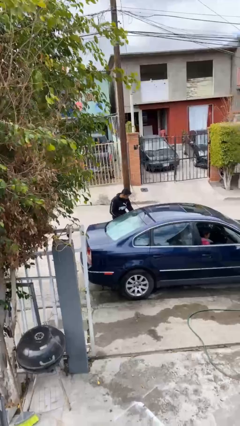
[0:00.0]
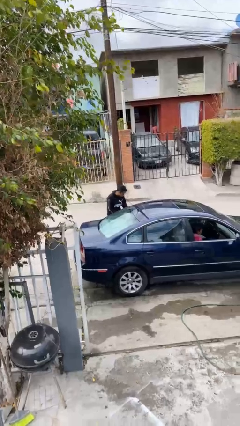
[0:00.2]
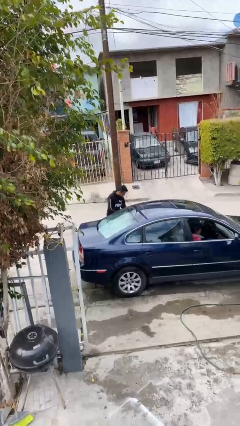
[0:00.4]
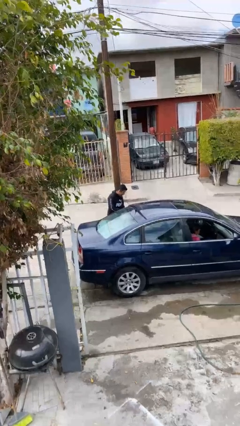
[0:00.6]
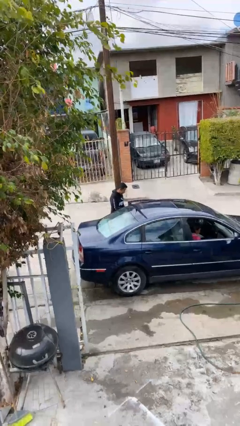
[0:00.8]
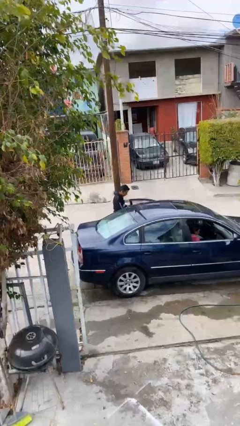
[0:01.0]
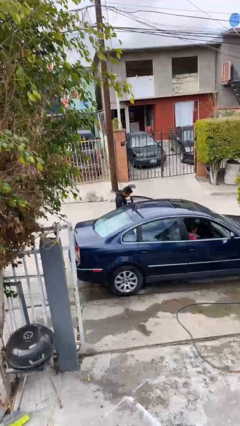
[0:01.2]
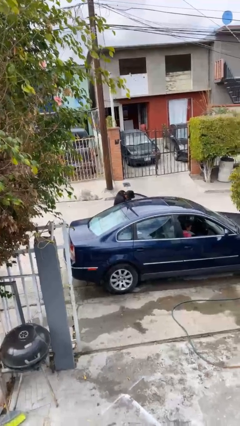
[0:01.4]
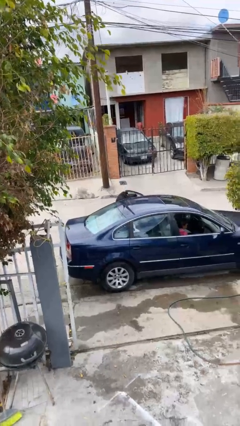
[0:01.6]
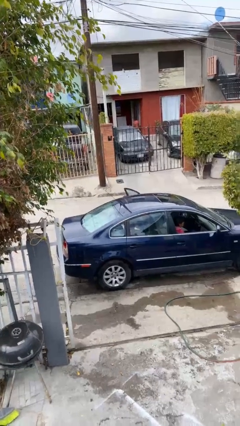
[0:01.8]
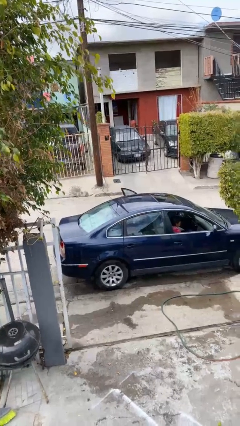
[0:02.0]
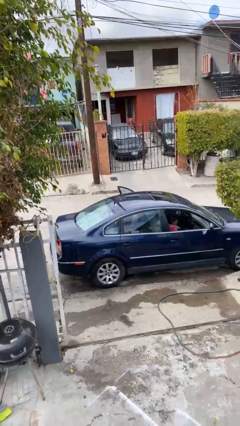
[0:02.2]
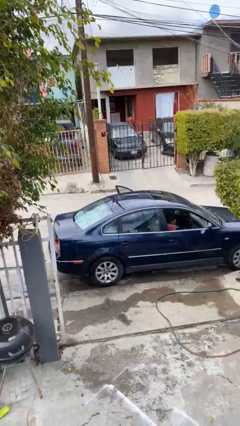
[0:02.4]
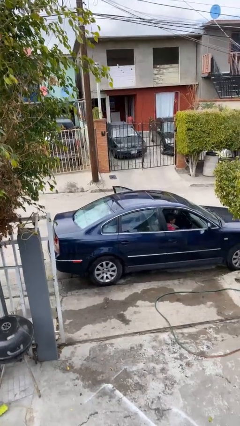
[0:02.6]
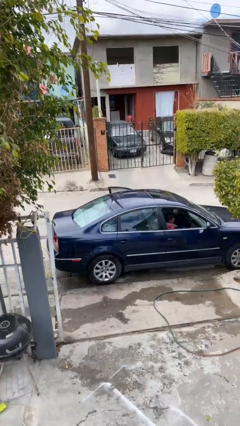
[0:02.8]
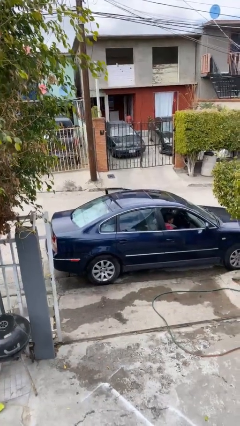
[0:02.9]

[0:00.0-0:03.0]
car picks up person

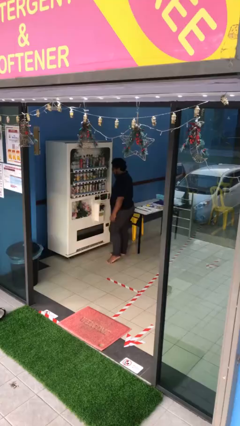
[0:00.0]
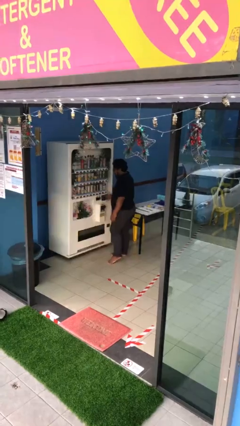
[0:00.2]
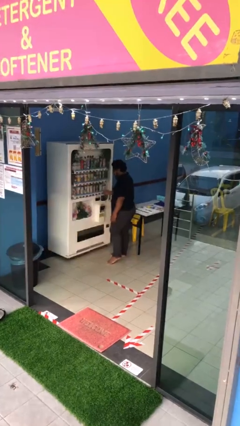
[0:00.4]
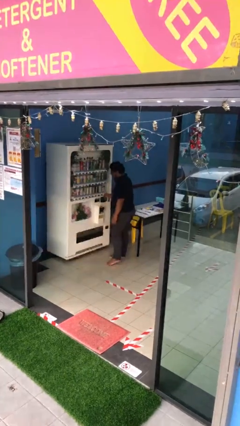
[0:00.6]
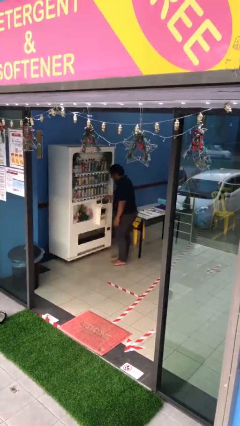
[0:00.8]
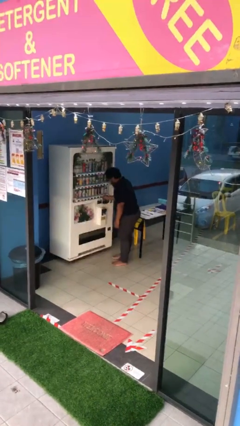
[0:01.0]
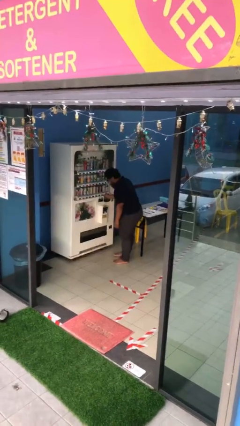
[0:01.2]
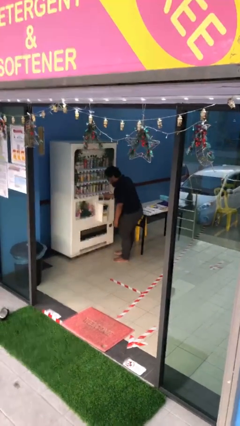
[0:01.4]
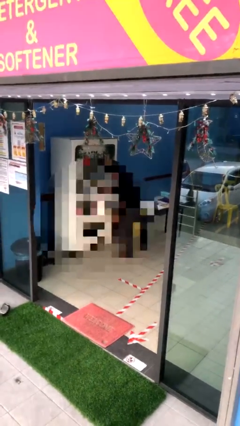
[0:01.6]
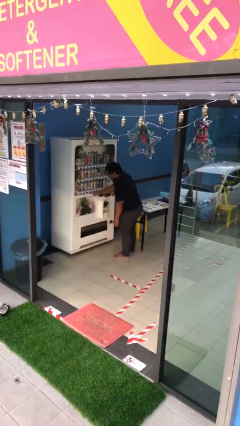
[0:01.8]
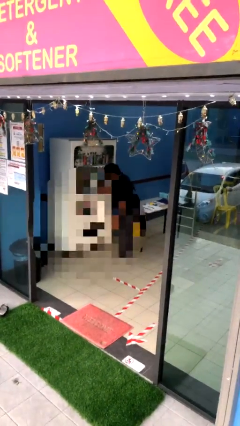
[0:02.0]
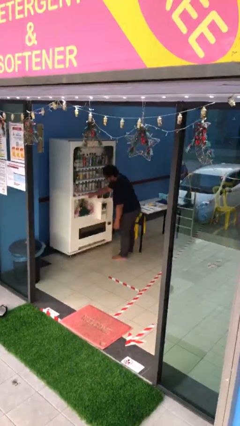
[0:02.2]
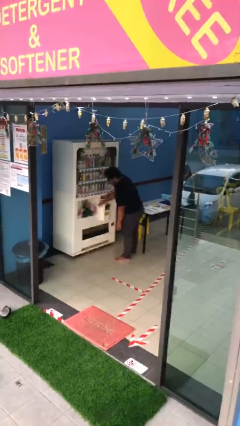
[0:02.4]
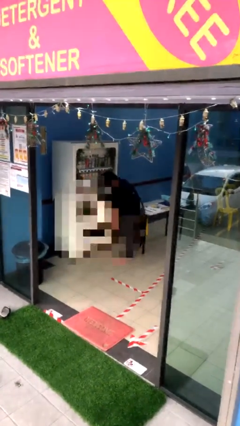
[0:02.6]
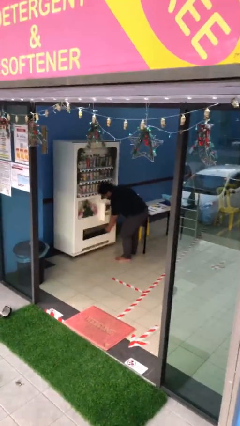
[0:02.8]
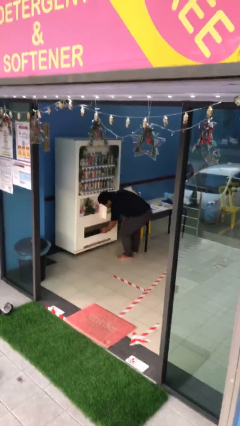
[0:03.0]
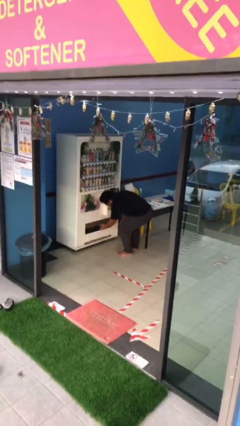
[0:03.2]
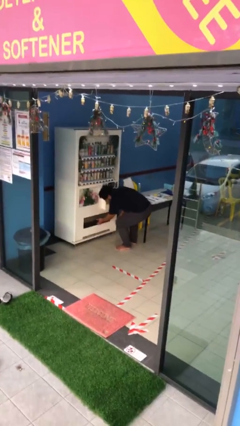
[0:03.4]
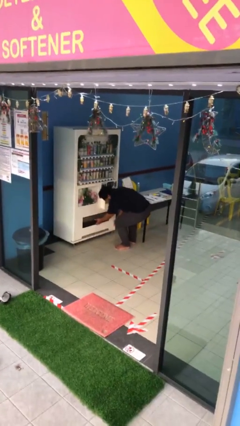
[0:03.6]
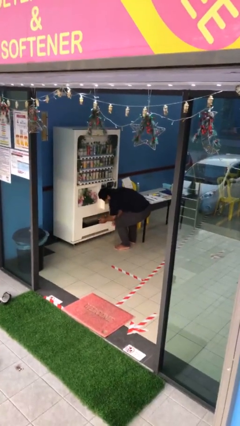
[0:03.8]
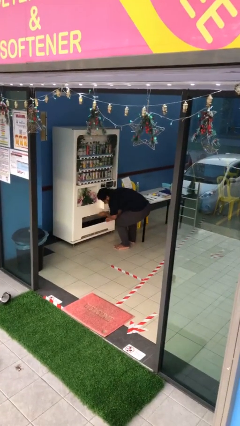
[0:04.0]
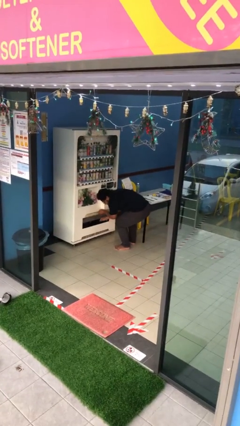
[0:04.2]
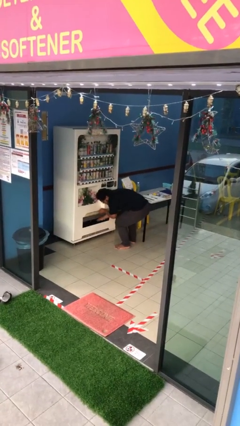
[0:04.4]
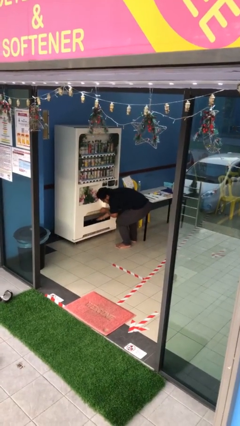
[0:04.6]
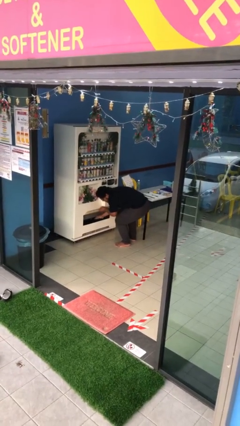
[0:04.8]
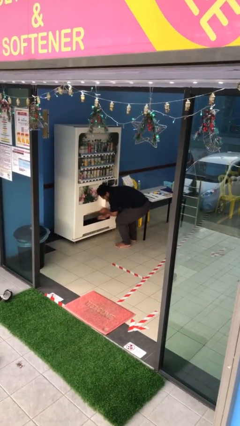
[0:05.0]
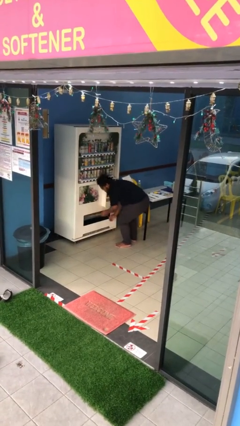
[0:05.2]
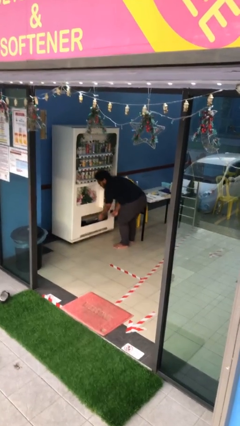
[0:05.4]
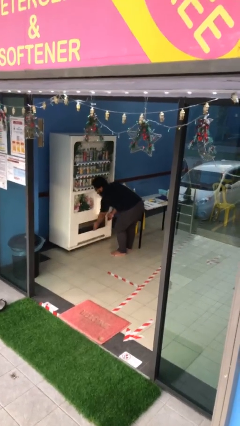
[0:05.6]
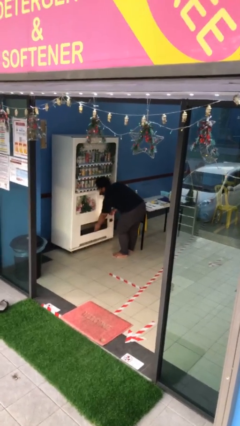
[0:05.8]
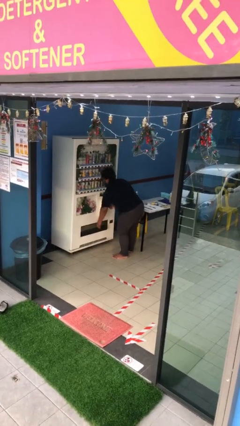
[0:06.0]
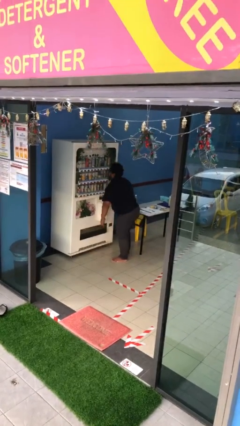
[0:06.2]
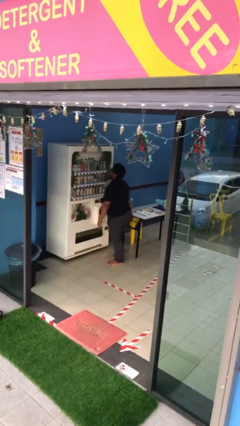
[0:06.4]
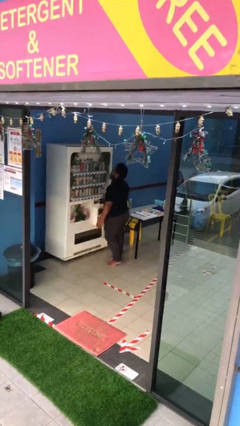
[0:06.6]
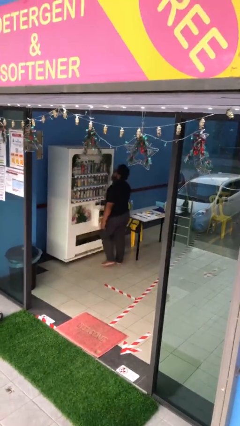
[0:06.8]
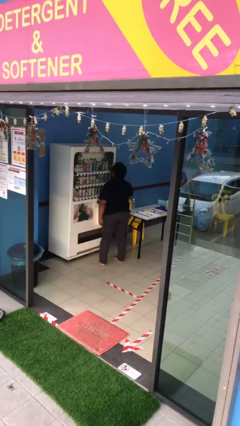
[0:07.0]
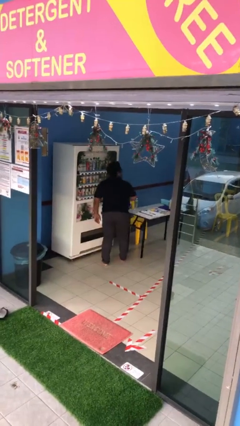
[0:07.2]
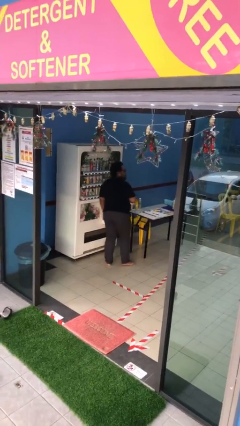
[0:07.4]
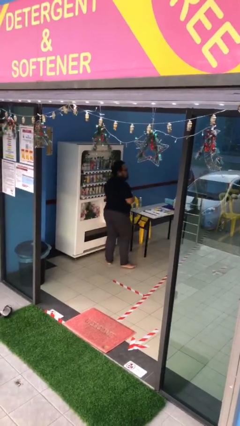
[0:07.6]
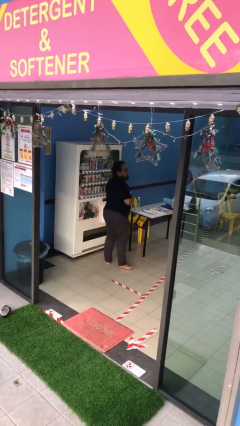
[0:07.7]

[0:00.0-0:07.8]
person purchases from machine

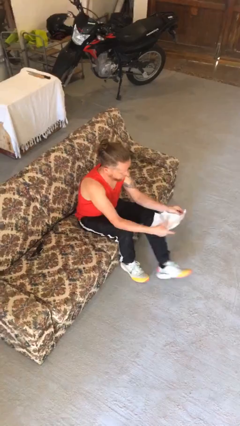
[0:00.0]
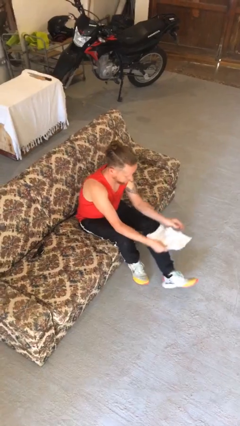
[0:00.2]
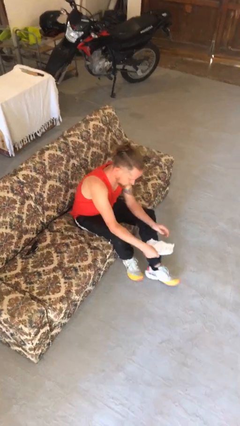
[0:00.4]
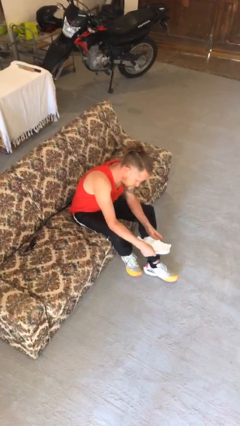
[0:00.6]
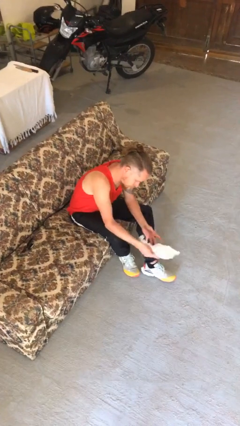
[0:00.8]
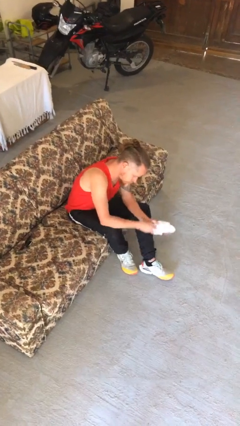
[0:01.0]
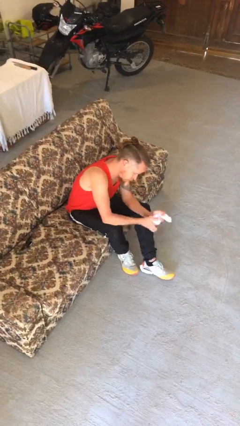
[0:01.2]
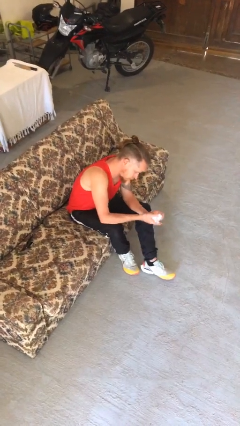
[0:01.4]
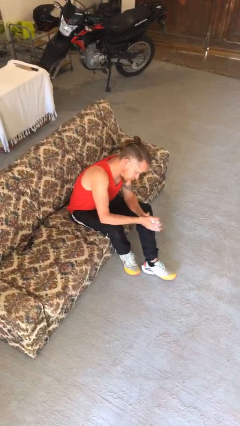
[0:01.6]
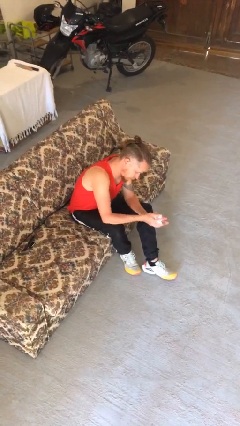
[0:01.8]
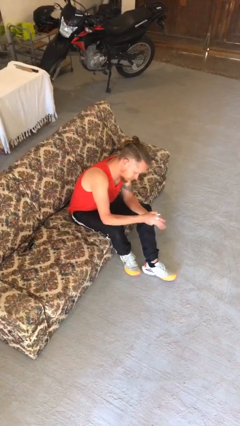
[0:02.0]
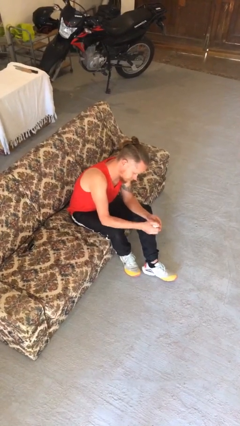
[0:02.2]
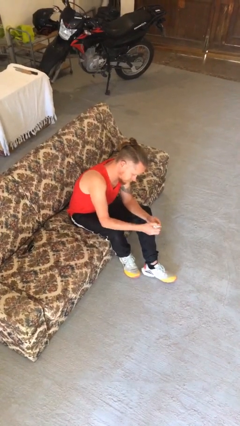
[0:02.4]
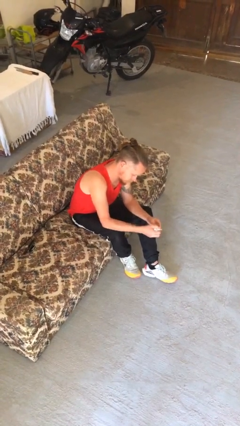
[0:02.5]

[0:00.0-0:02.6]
person crumples paper

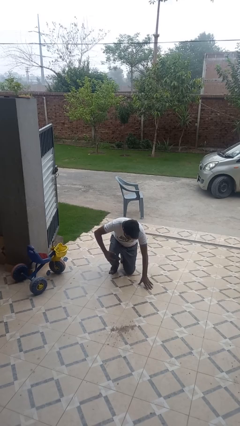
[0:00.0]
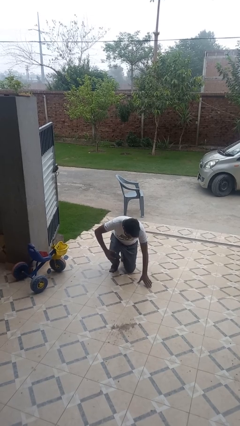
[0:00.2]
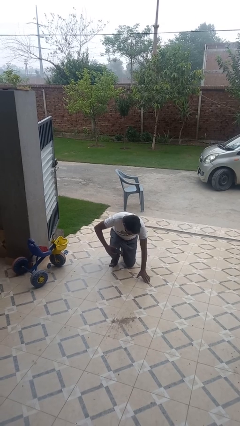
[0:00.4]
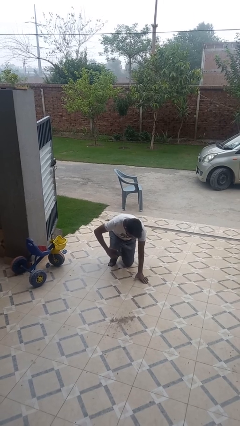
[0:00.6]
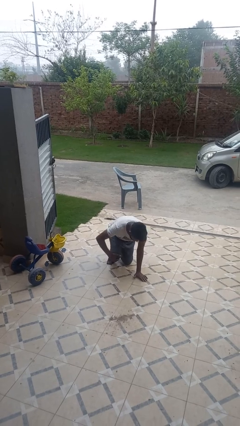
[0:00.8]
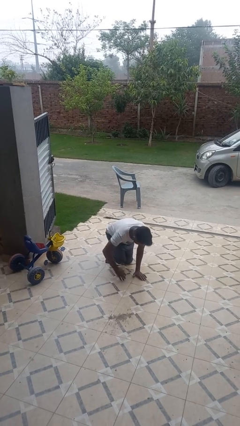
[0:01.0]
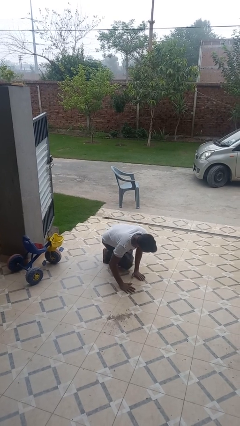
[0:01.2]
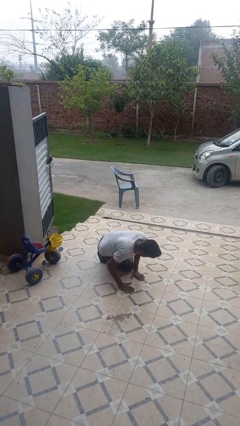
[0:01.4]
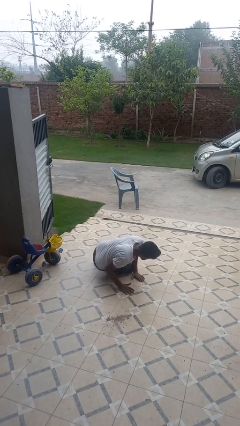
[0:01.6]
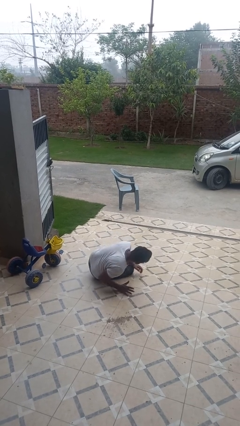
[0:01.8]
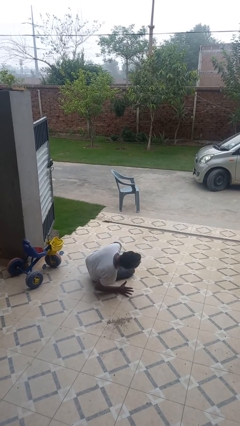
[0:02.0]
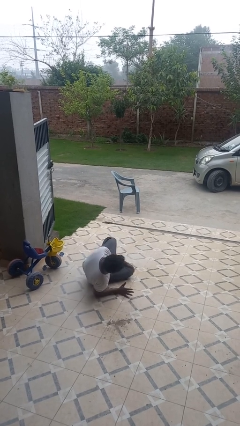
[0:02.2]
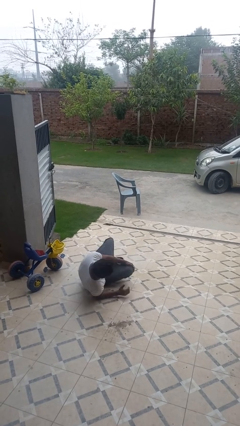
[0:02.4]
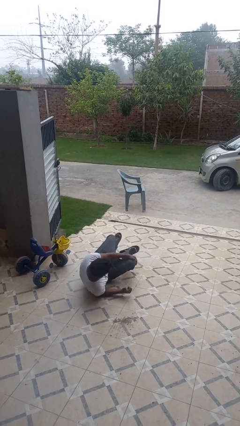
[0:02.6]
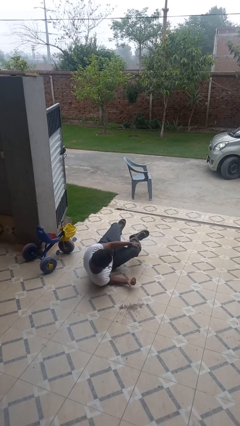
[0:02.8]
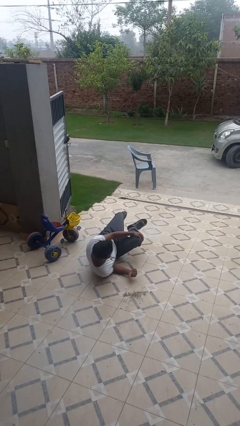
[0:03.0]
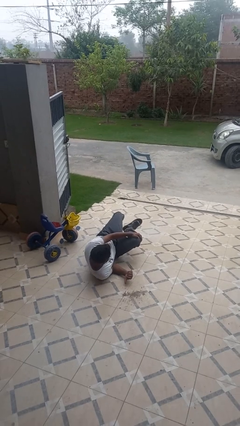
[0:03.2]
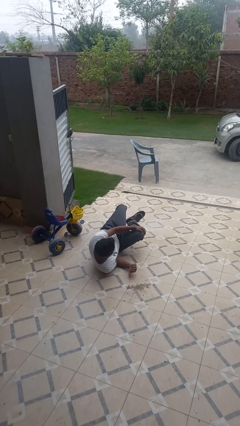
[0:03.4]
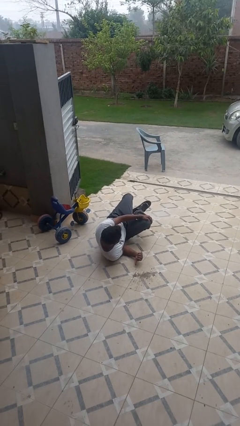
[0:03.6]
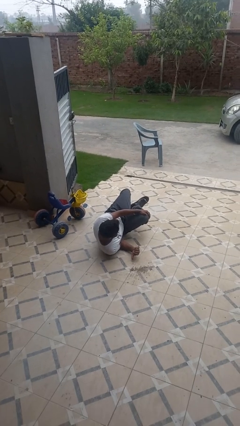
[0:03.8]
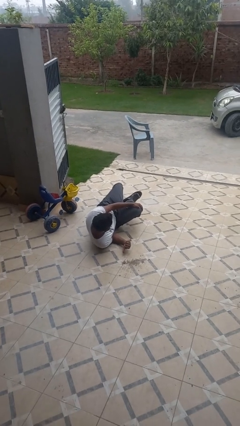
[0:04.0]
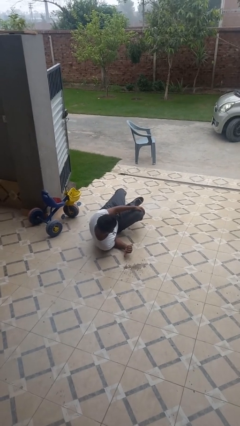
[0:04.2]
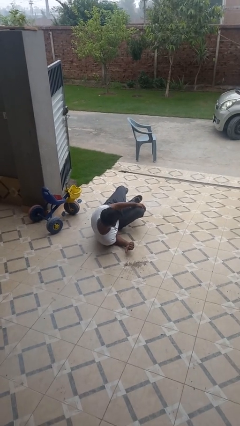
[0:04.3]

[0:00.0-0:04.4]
person lies down on floor
